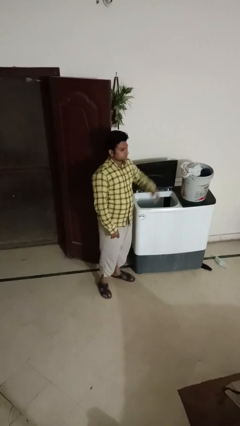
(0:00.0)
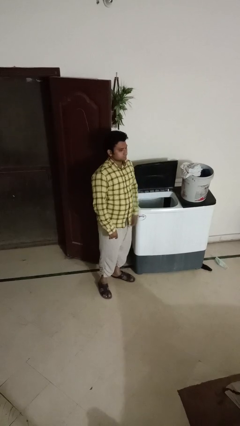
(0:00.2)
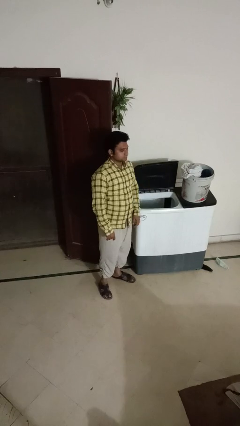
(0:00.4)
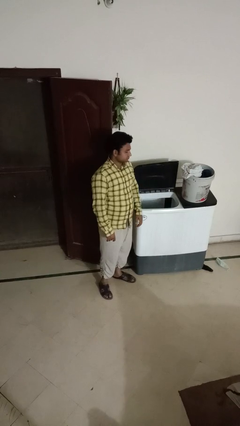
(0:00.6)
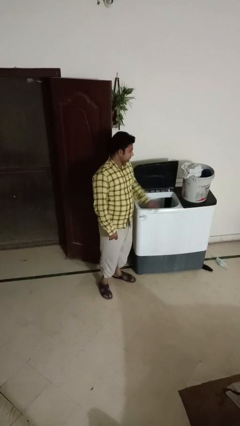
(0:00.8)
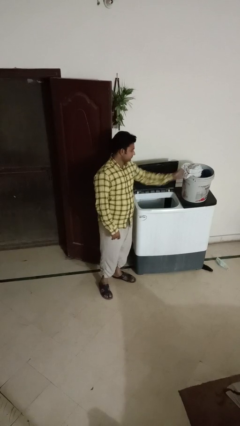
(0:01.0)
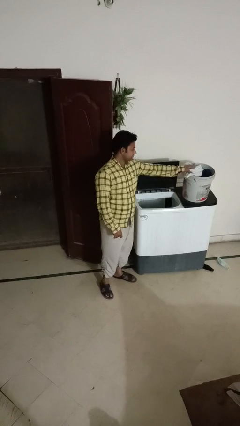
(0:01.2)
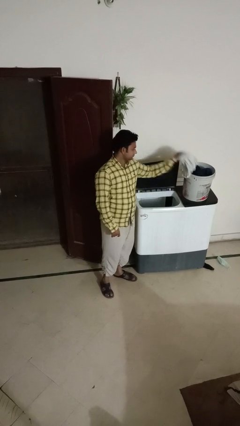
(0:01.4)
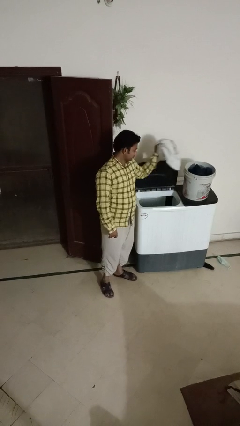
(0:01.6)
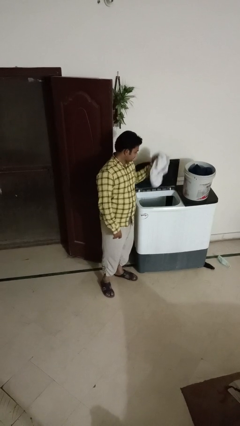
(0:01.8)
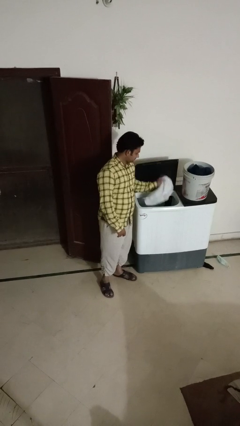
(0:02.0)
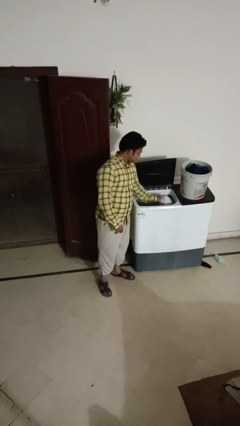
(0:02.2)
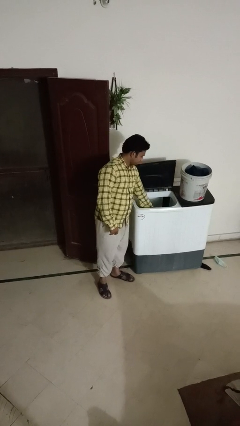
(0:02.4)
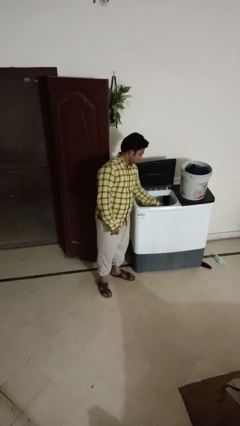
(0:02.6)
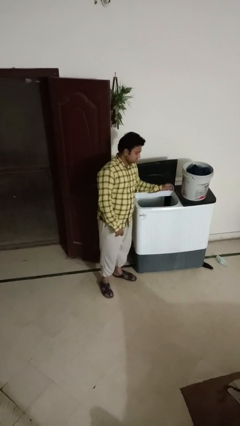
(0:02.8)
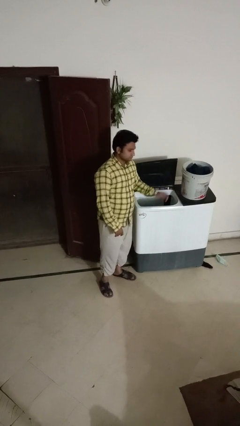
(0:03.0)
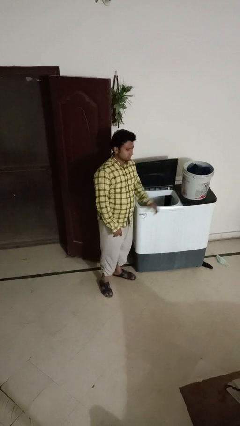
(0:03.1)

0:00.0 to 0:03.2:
person loads clotheswasher

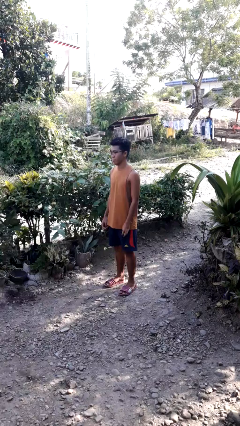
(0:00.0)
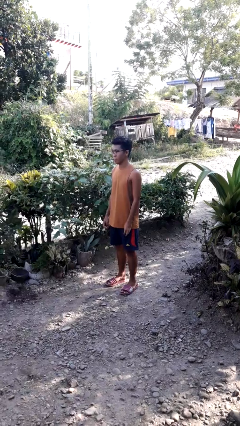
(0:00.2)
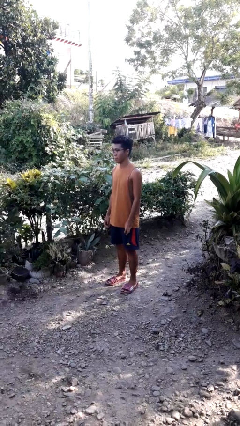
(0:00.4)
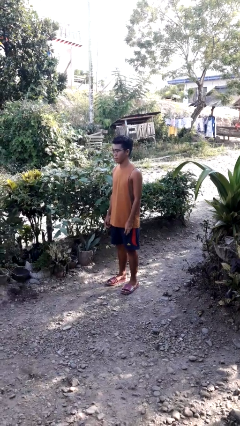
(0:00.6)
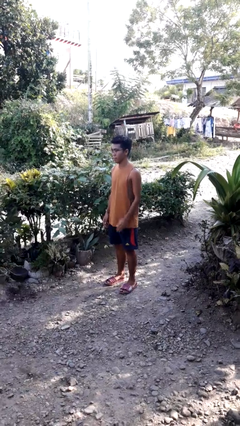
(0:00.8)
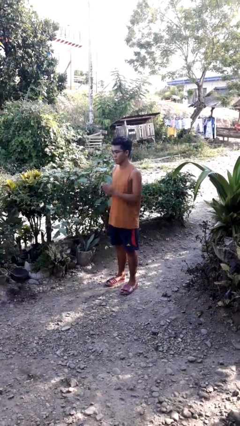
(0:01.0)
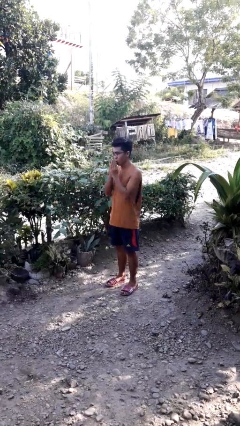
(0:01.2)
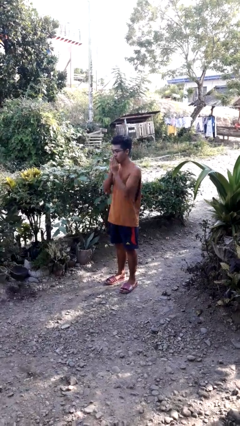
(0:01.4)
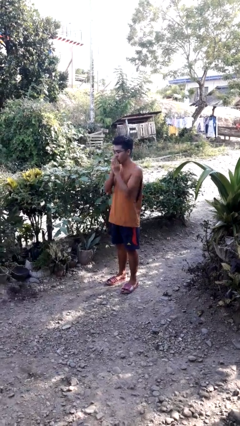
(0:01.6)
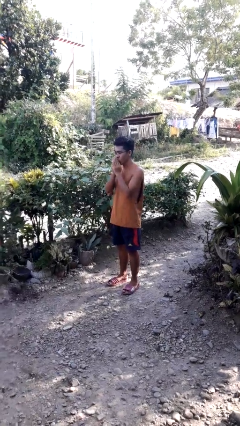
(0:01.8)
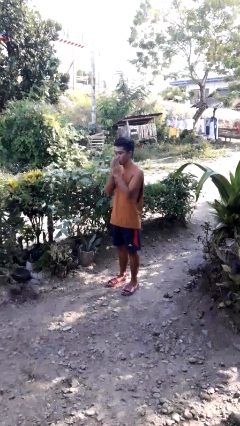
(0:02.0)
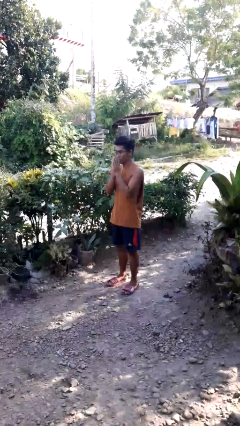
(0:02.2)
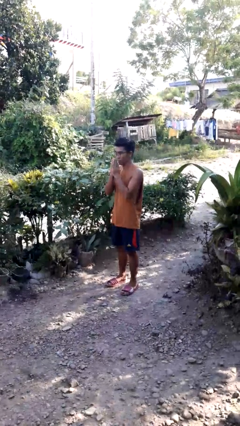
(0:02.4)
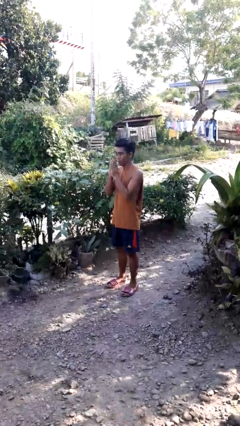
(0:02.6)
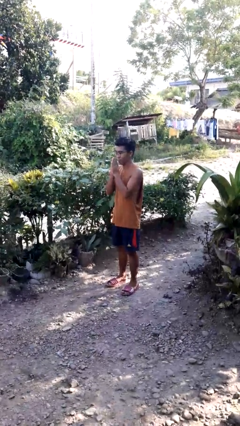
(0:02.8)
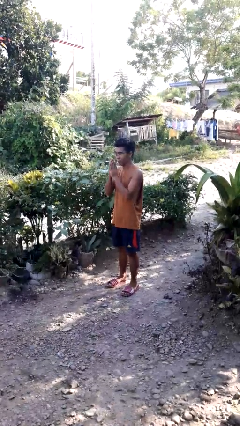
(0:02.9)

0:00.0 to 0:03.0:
person blows into hands

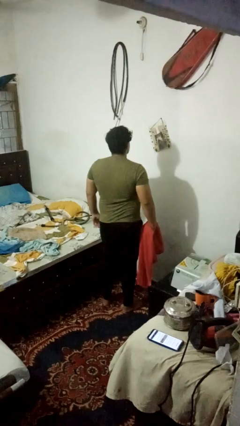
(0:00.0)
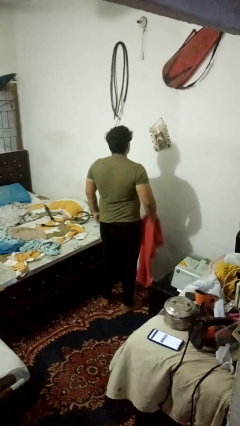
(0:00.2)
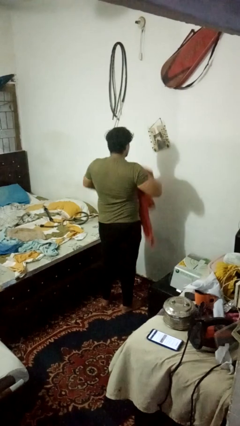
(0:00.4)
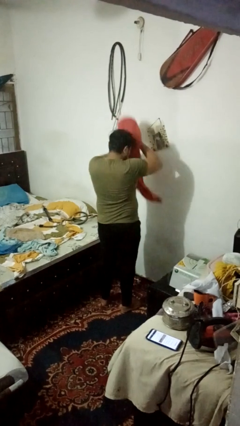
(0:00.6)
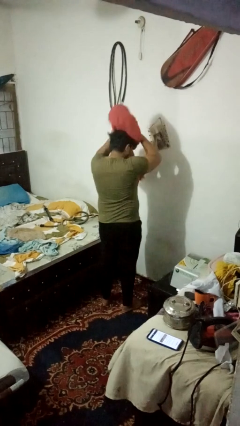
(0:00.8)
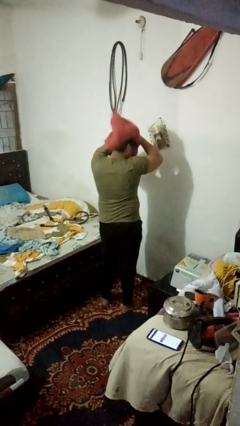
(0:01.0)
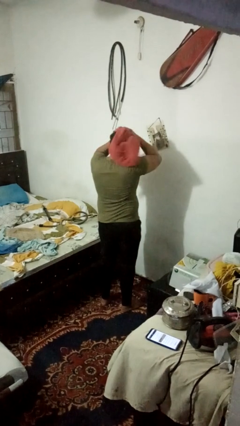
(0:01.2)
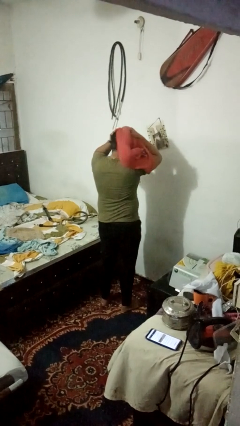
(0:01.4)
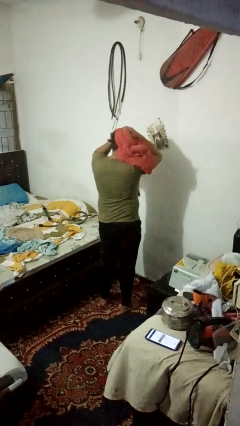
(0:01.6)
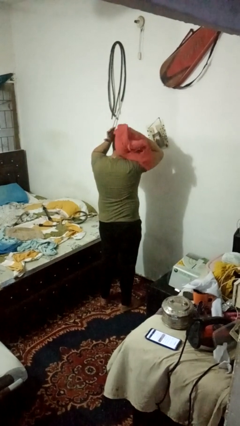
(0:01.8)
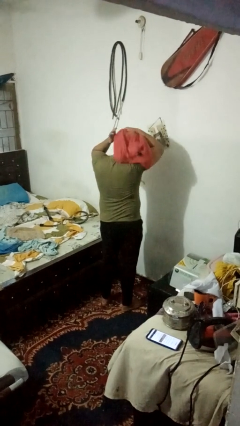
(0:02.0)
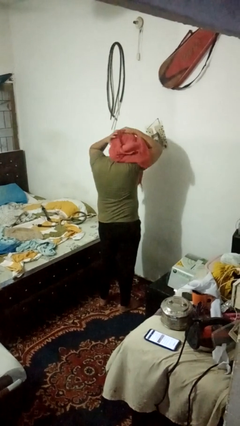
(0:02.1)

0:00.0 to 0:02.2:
person dries hair with towel

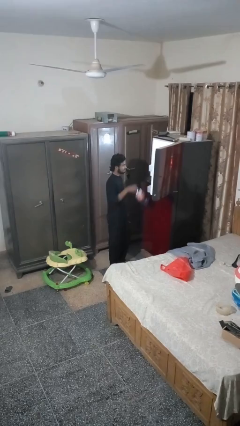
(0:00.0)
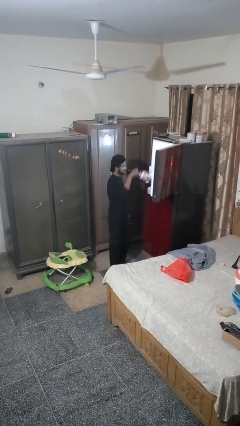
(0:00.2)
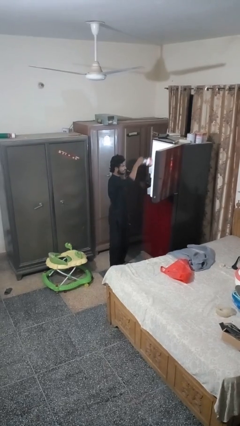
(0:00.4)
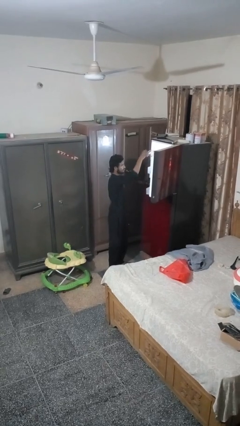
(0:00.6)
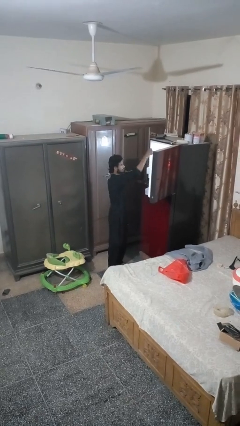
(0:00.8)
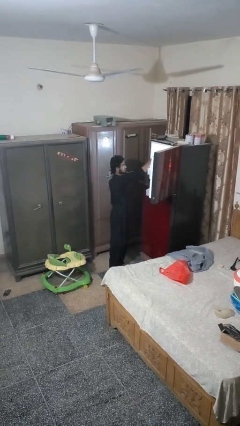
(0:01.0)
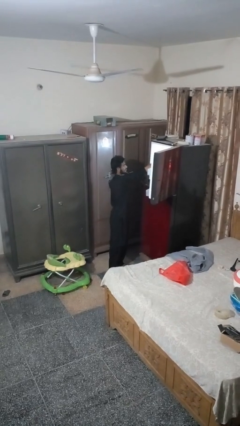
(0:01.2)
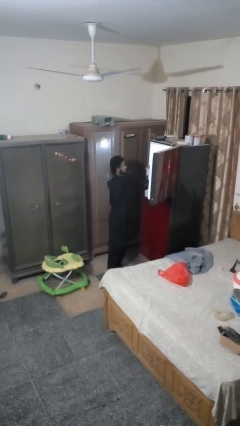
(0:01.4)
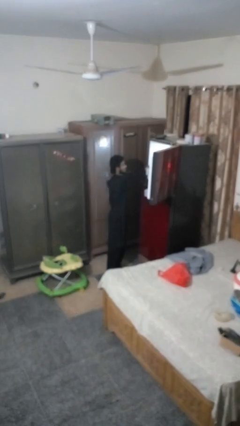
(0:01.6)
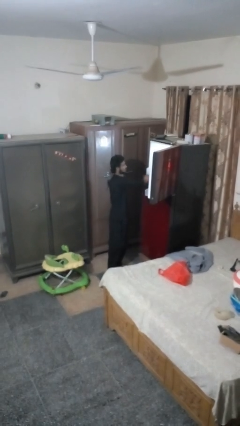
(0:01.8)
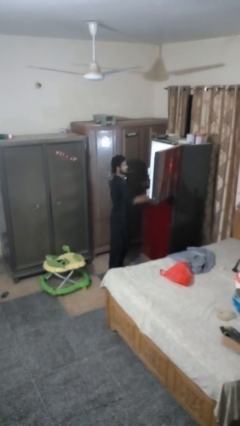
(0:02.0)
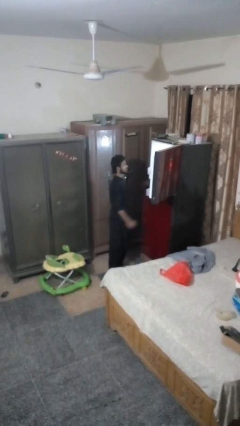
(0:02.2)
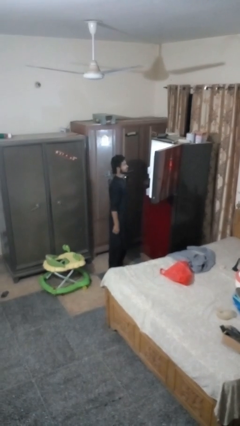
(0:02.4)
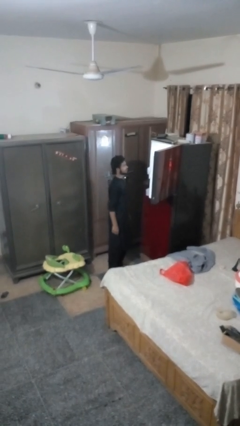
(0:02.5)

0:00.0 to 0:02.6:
person puts object into refrigerator

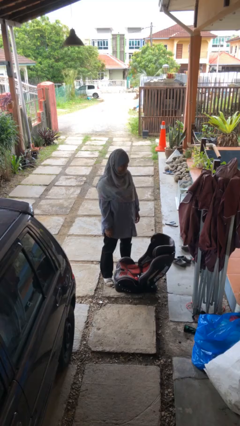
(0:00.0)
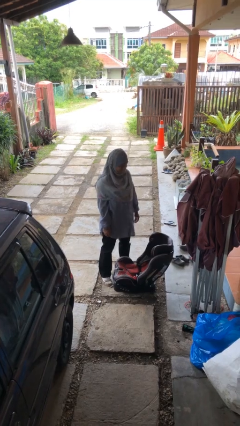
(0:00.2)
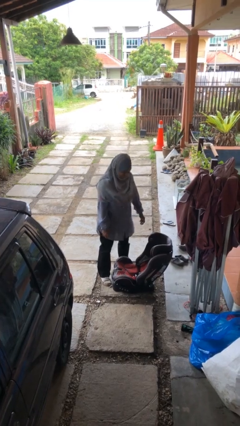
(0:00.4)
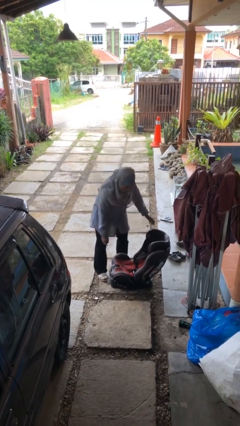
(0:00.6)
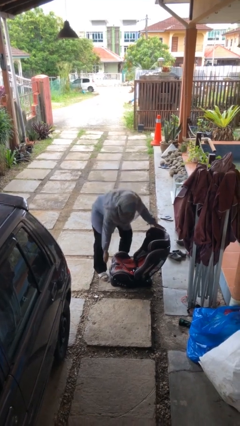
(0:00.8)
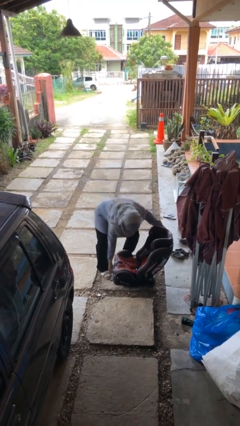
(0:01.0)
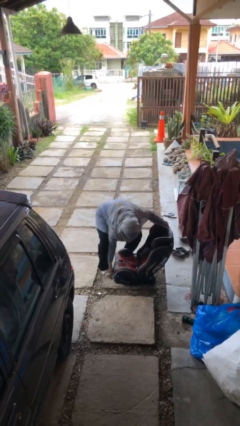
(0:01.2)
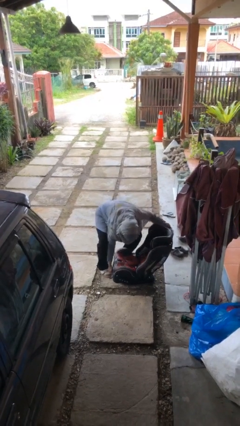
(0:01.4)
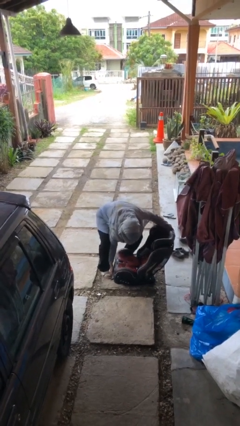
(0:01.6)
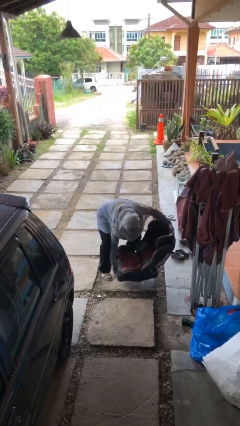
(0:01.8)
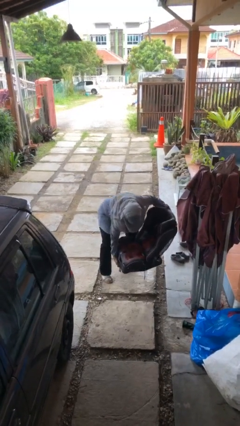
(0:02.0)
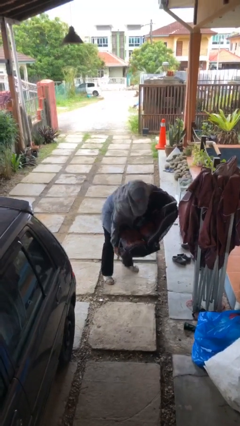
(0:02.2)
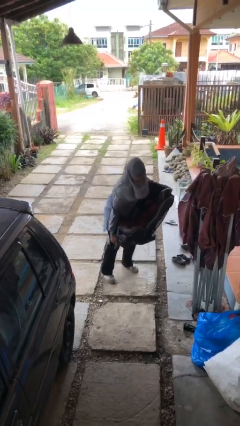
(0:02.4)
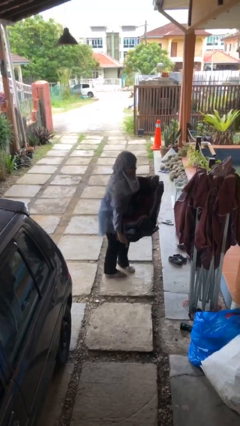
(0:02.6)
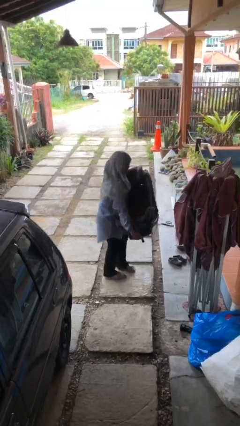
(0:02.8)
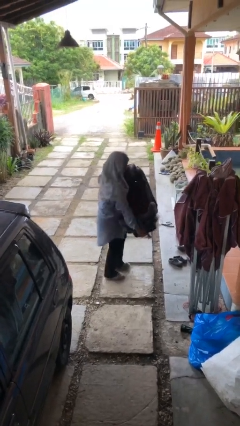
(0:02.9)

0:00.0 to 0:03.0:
person picks up object from floor

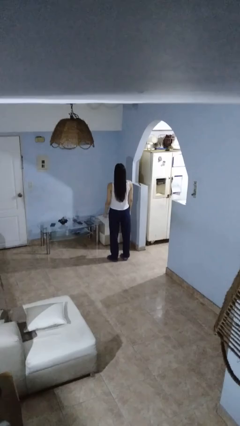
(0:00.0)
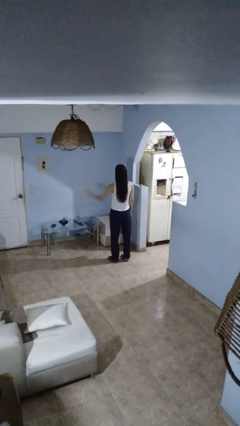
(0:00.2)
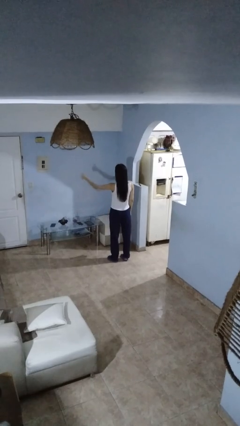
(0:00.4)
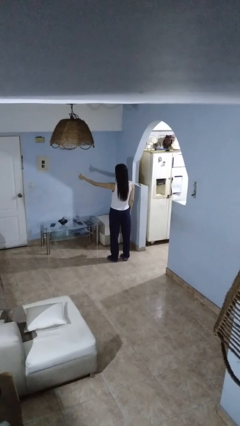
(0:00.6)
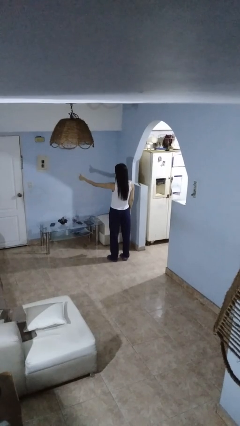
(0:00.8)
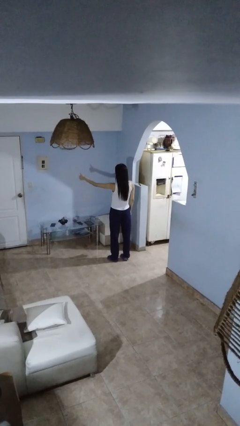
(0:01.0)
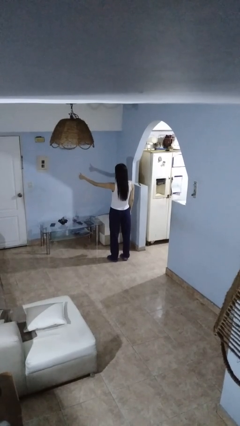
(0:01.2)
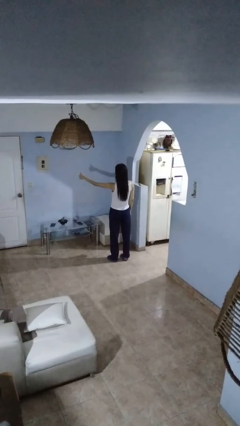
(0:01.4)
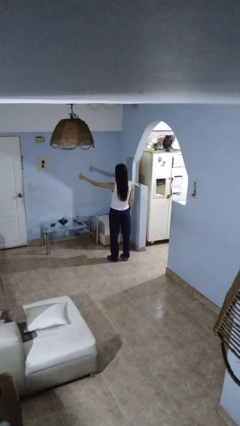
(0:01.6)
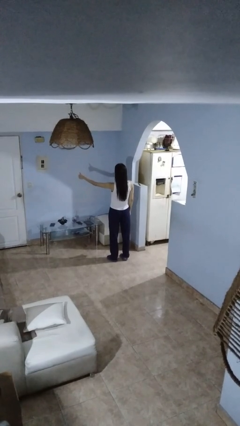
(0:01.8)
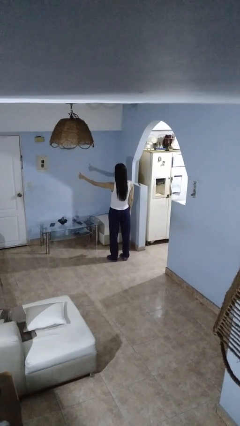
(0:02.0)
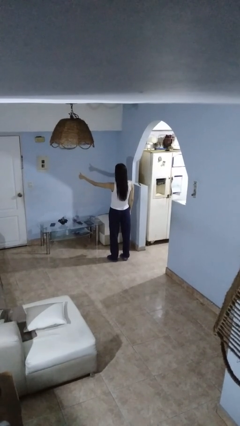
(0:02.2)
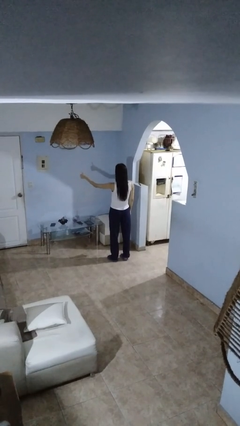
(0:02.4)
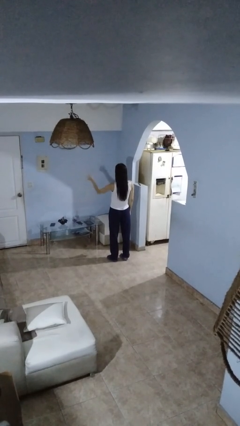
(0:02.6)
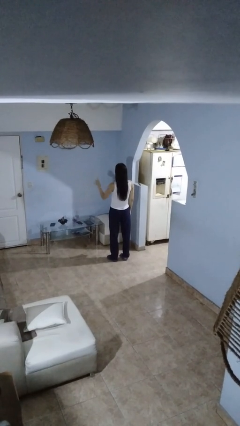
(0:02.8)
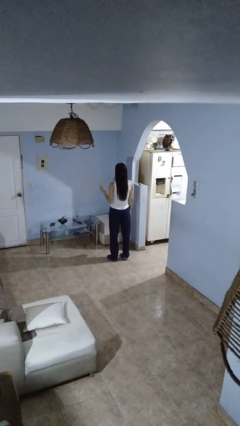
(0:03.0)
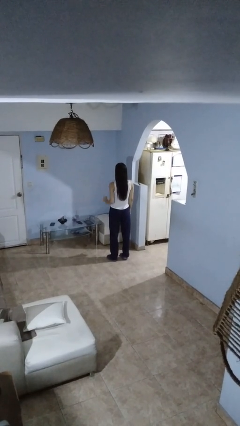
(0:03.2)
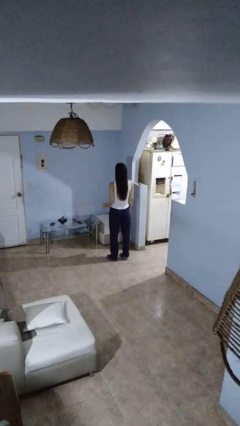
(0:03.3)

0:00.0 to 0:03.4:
person gestures thumbs up

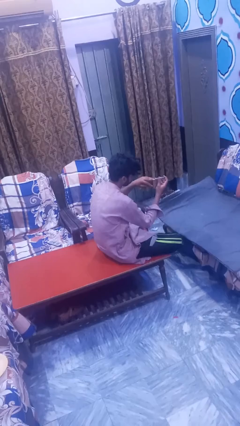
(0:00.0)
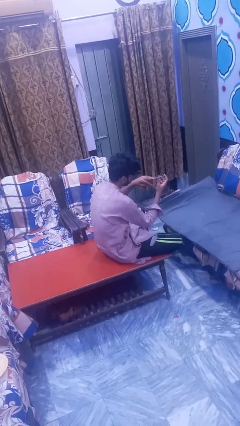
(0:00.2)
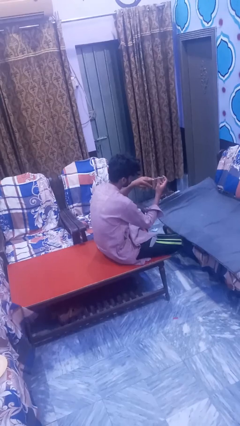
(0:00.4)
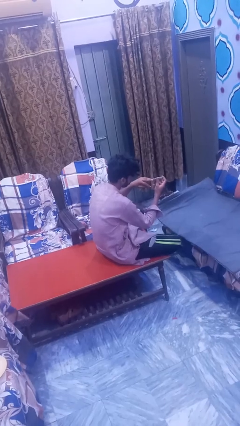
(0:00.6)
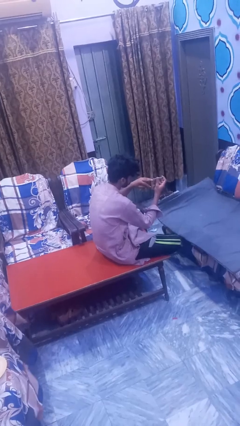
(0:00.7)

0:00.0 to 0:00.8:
person clips fingernails